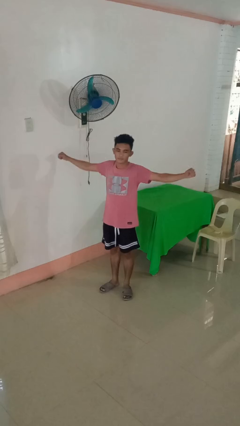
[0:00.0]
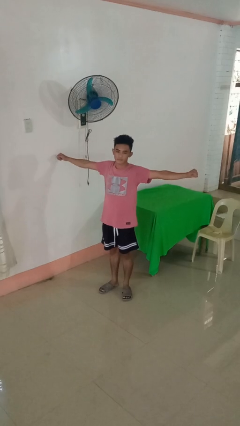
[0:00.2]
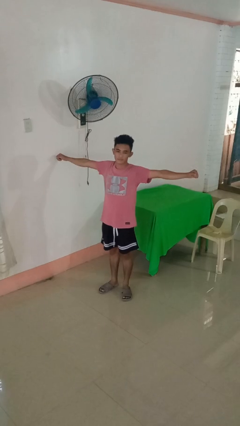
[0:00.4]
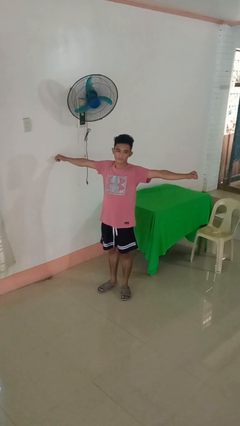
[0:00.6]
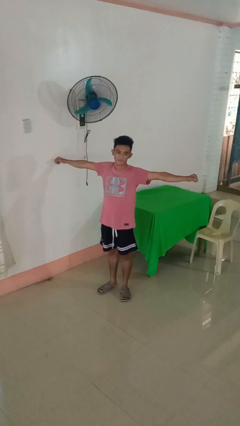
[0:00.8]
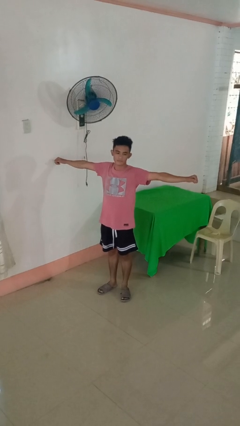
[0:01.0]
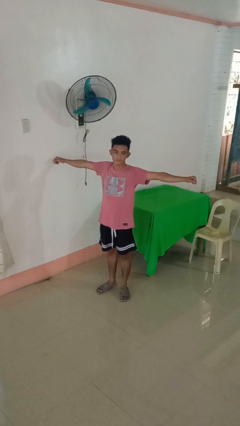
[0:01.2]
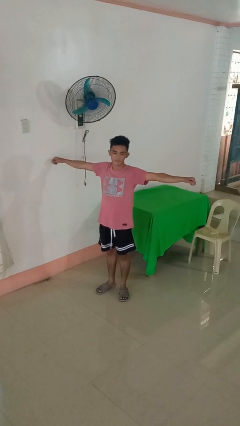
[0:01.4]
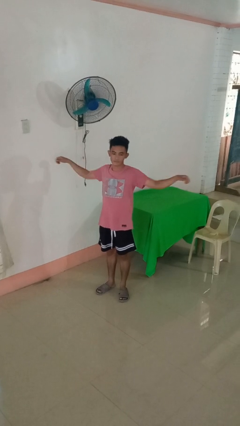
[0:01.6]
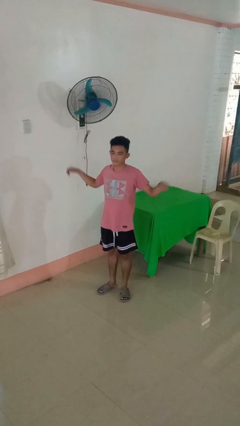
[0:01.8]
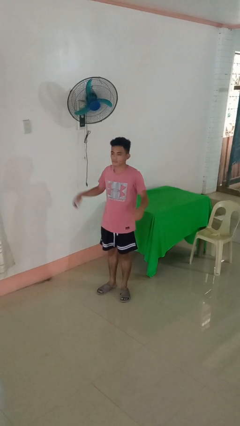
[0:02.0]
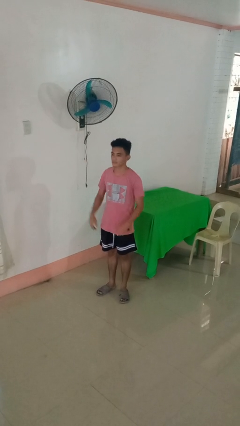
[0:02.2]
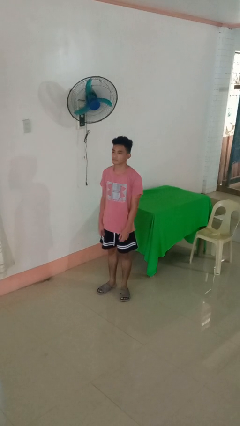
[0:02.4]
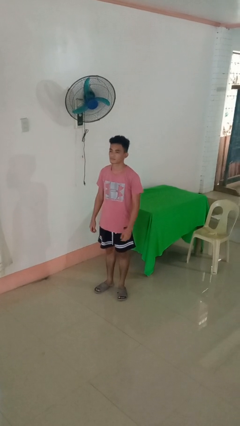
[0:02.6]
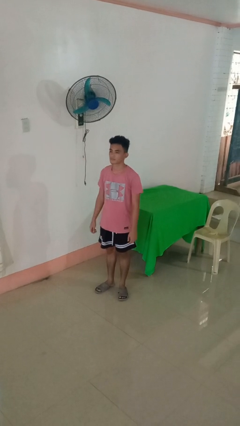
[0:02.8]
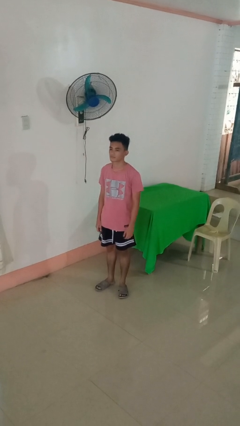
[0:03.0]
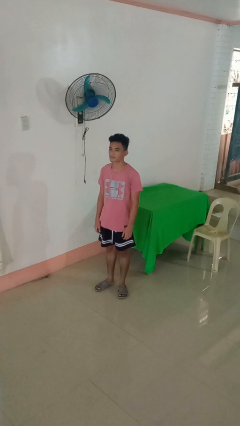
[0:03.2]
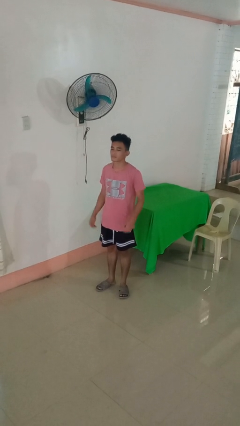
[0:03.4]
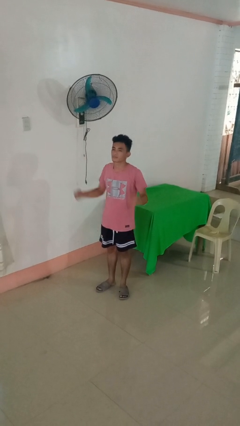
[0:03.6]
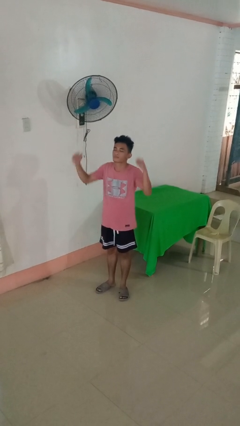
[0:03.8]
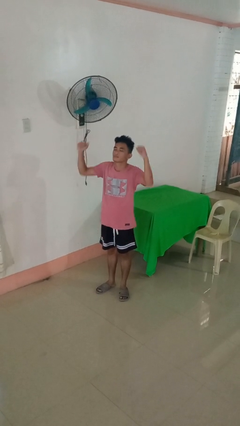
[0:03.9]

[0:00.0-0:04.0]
person stretches arms to side

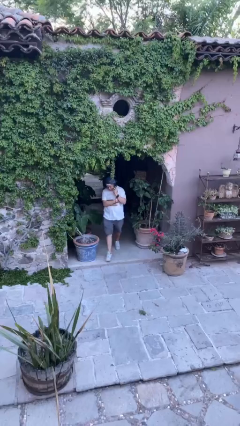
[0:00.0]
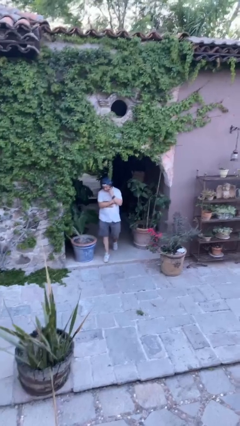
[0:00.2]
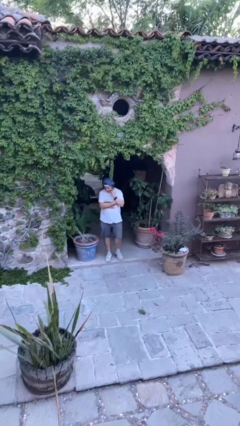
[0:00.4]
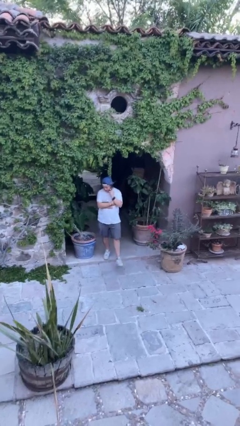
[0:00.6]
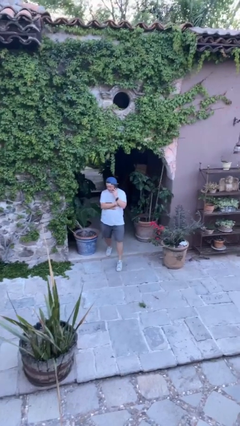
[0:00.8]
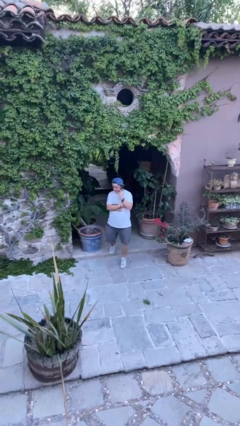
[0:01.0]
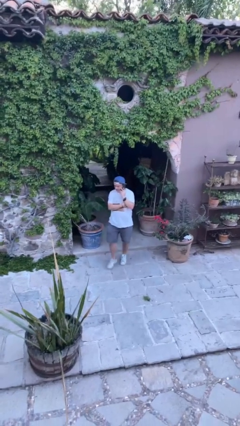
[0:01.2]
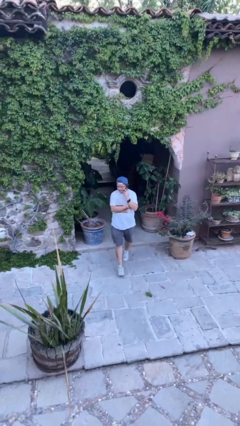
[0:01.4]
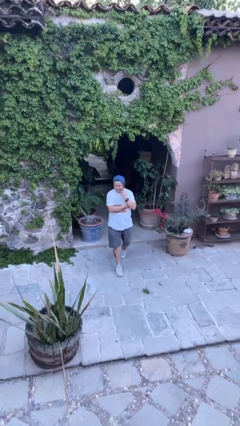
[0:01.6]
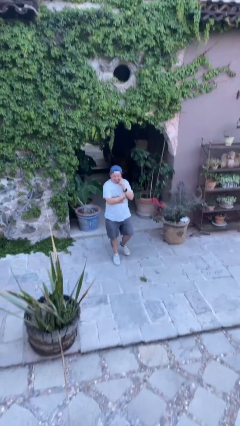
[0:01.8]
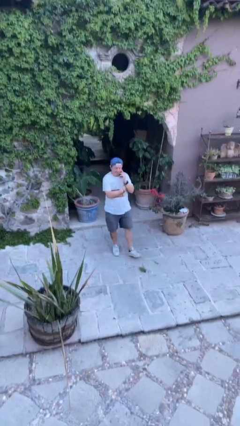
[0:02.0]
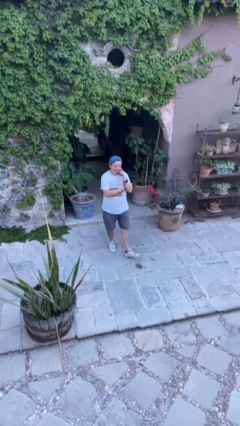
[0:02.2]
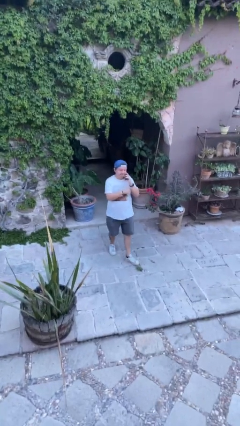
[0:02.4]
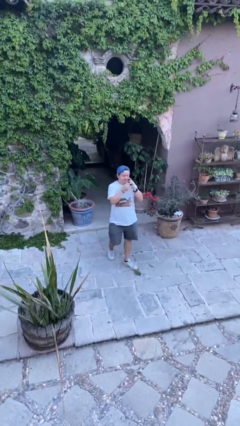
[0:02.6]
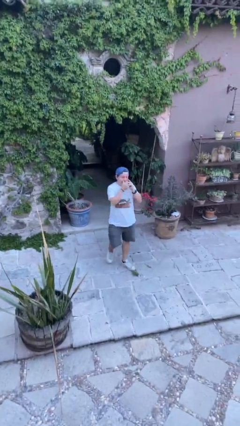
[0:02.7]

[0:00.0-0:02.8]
person enters scene through structure

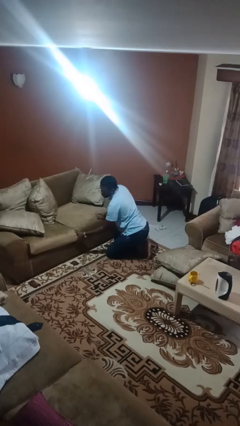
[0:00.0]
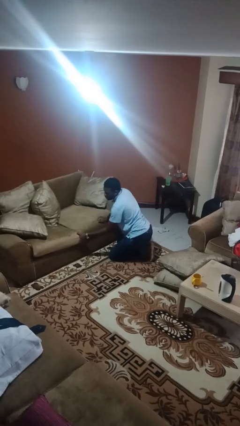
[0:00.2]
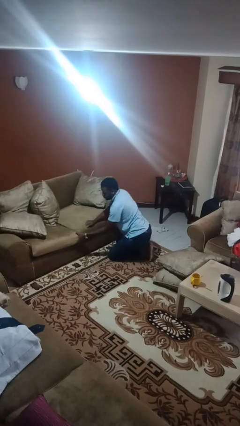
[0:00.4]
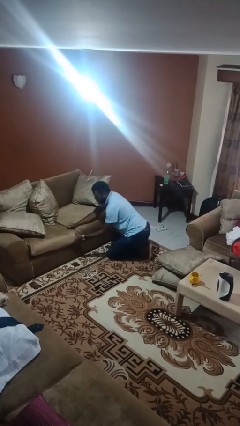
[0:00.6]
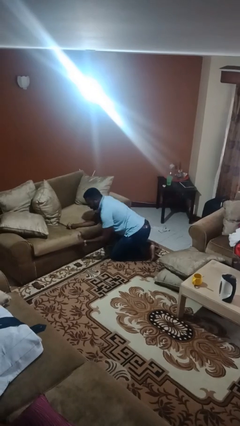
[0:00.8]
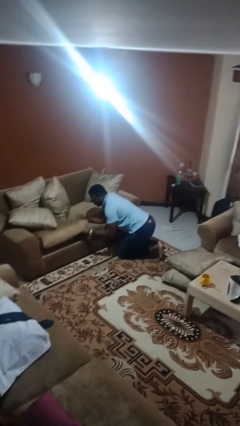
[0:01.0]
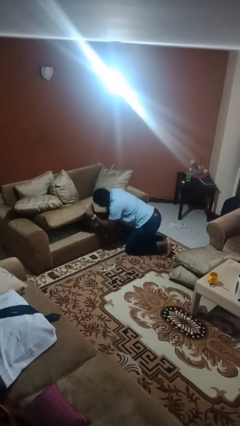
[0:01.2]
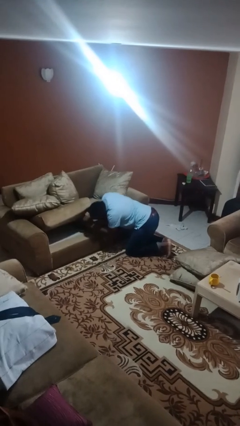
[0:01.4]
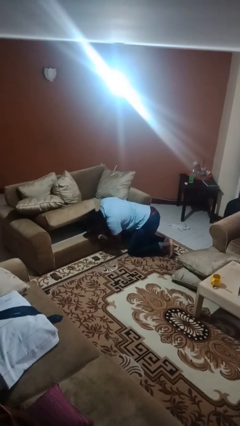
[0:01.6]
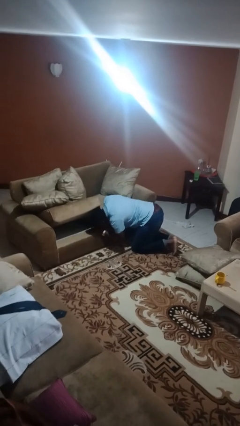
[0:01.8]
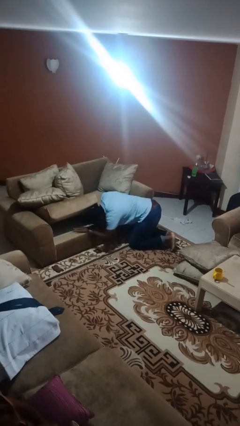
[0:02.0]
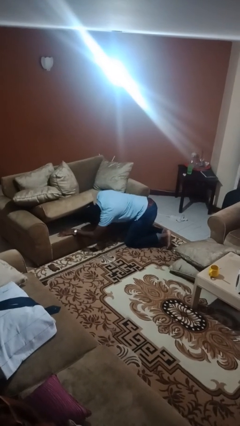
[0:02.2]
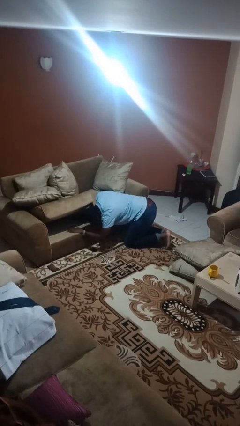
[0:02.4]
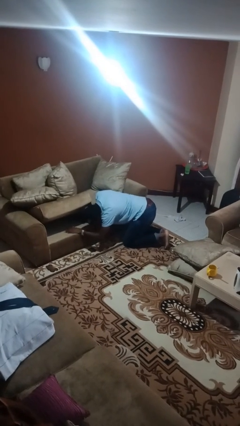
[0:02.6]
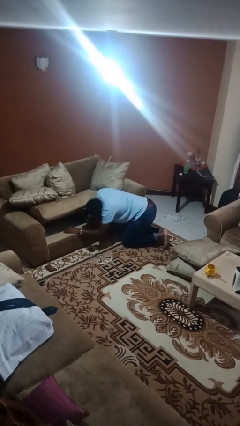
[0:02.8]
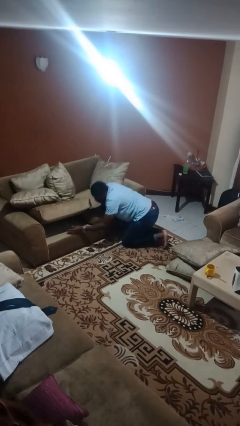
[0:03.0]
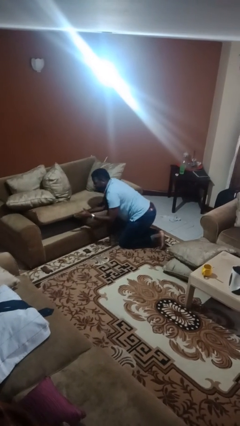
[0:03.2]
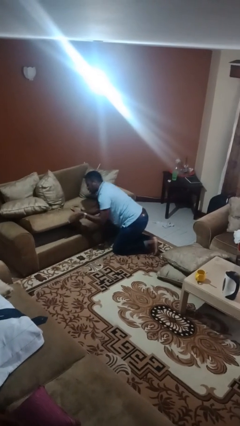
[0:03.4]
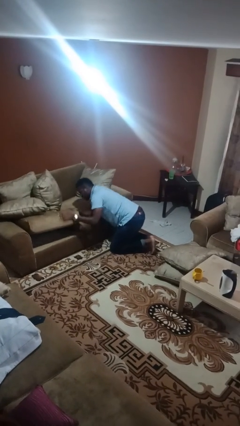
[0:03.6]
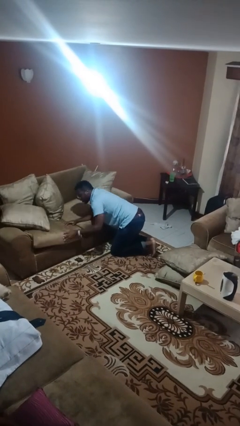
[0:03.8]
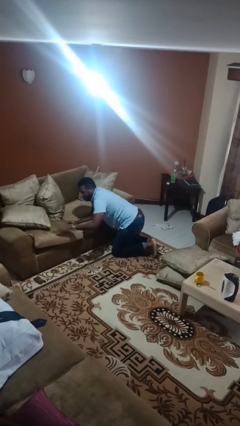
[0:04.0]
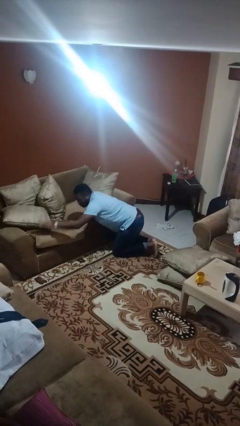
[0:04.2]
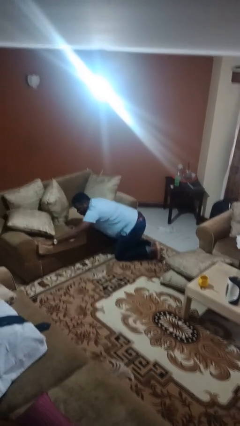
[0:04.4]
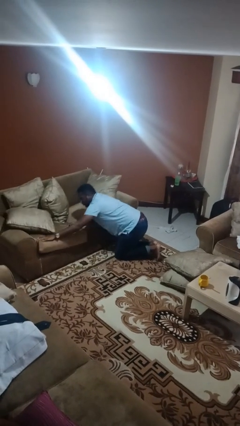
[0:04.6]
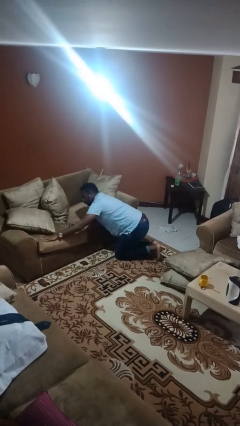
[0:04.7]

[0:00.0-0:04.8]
person searches under couch

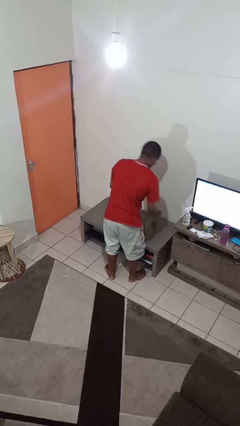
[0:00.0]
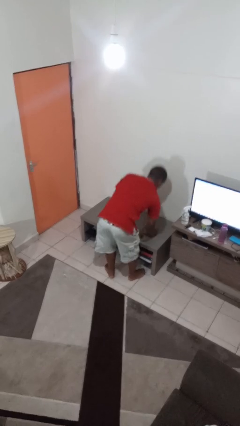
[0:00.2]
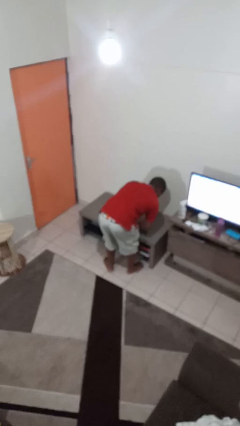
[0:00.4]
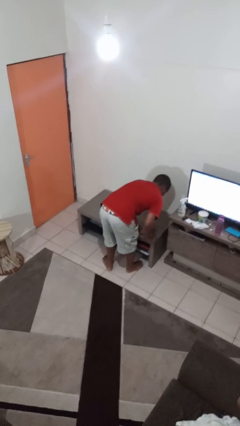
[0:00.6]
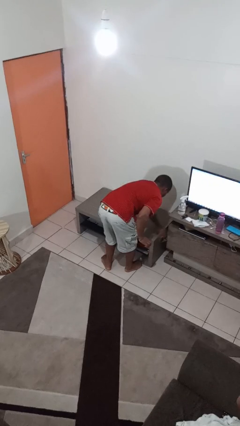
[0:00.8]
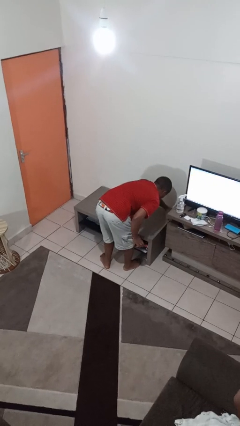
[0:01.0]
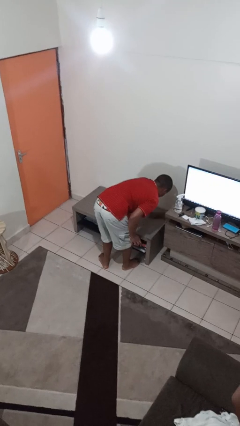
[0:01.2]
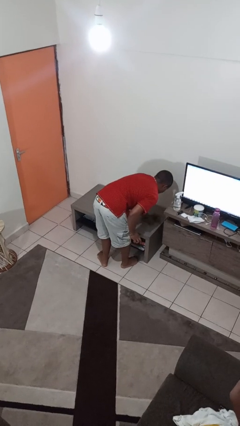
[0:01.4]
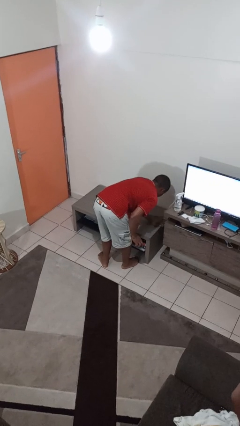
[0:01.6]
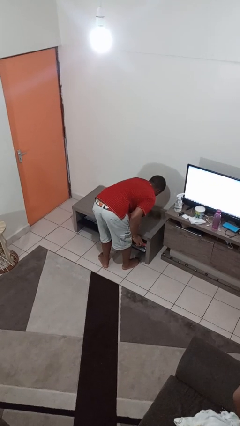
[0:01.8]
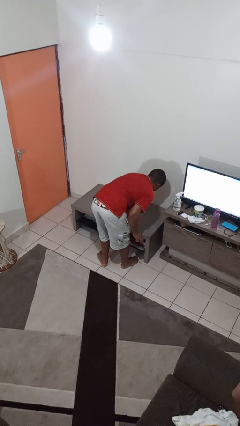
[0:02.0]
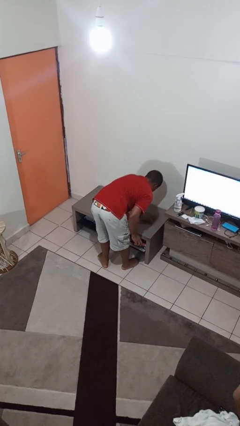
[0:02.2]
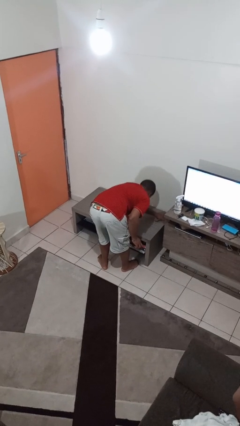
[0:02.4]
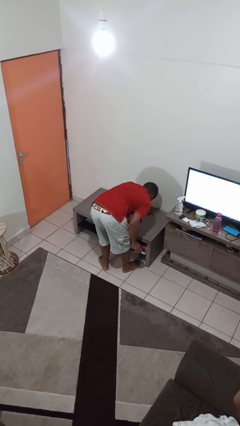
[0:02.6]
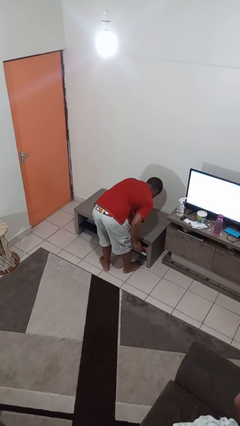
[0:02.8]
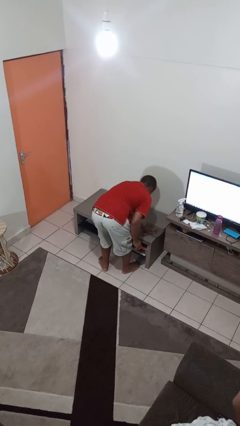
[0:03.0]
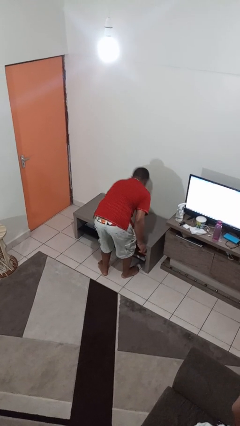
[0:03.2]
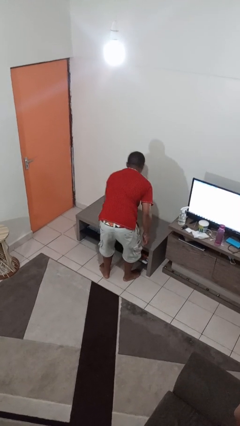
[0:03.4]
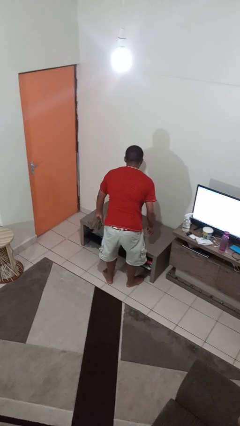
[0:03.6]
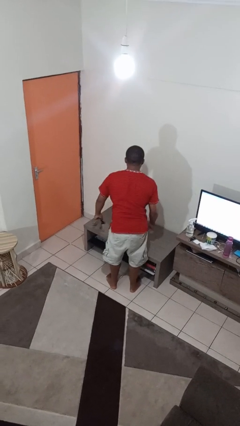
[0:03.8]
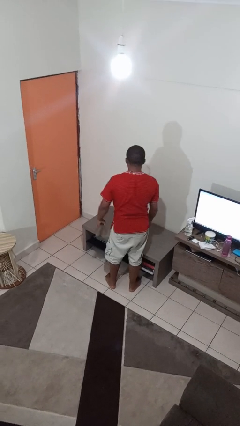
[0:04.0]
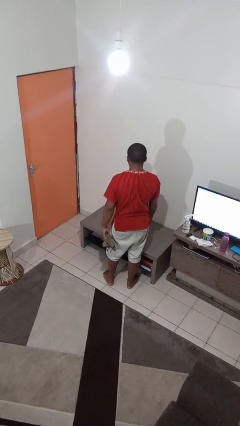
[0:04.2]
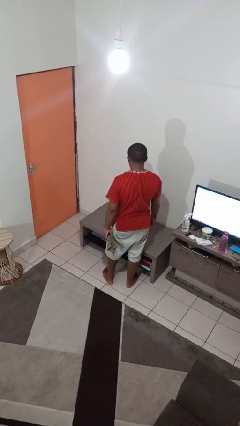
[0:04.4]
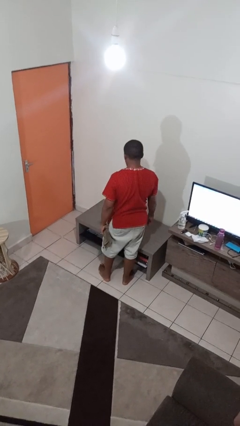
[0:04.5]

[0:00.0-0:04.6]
person cleans table with rag

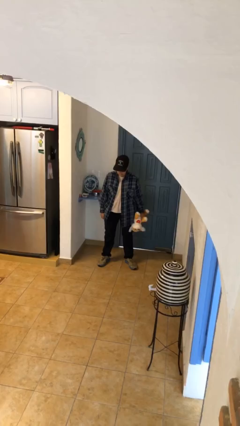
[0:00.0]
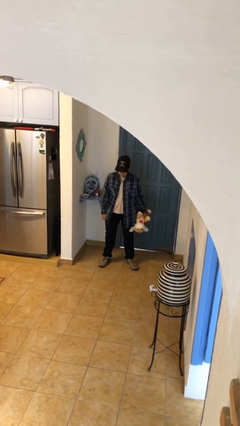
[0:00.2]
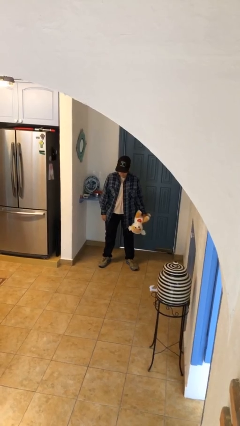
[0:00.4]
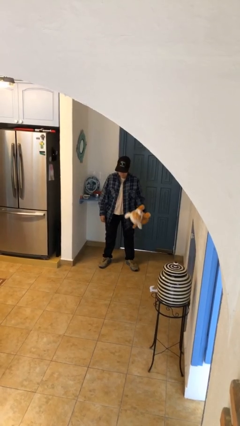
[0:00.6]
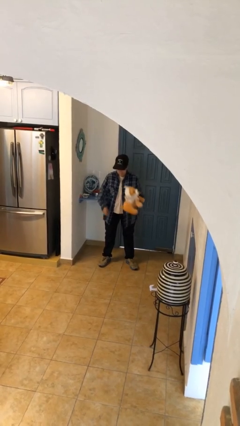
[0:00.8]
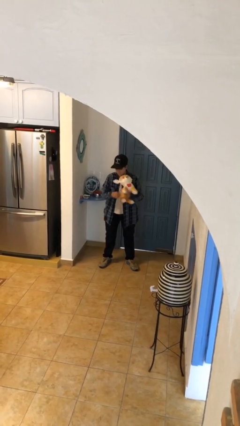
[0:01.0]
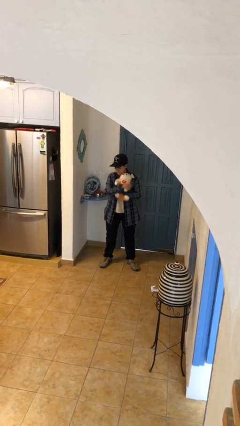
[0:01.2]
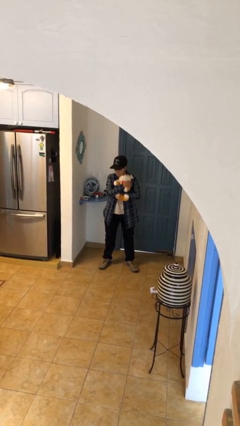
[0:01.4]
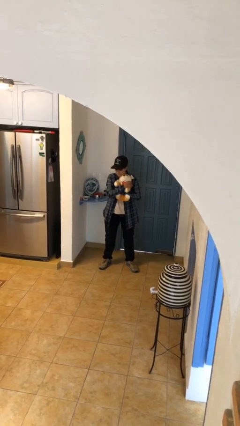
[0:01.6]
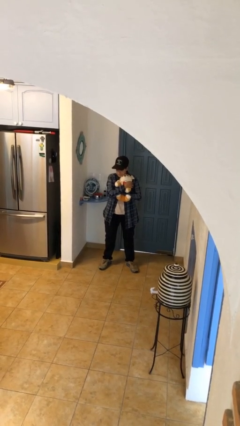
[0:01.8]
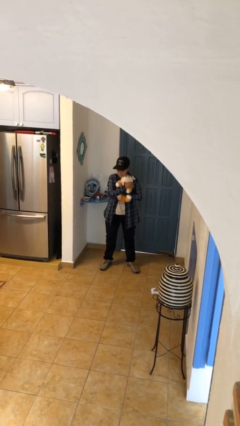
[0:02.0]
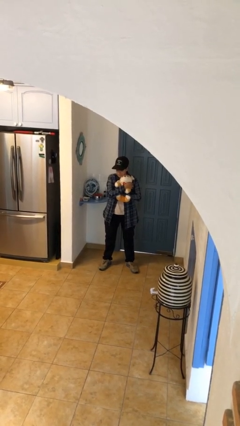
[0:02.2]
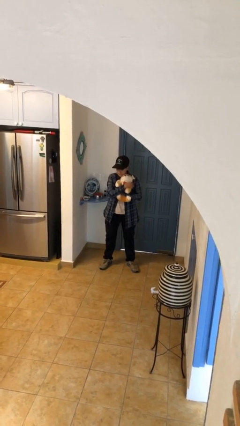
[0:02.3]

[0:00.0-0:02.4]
person hugs stuffed animal
